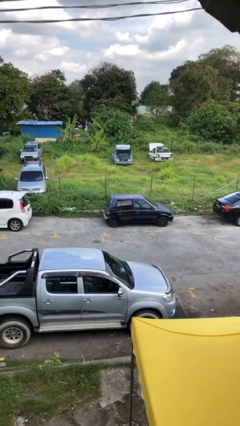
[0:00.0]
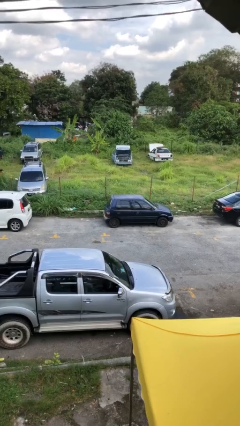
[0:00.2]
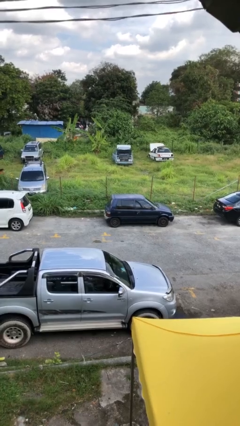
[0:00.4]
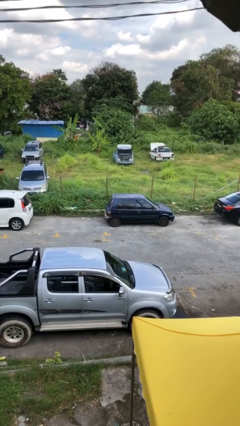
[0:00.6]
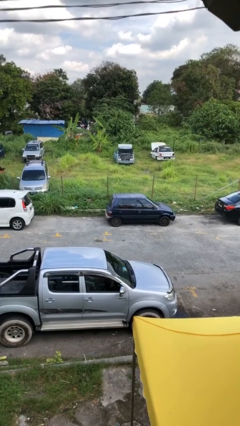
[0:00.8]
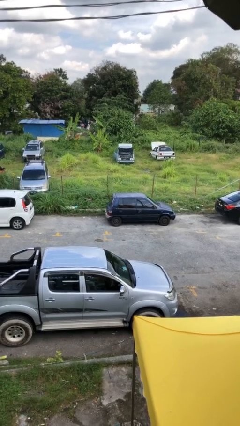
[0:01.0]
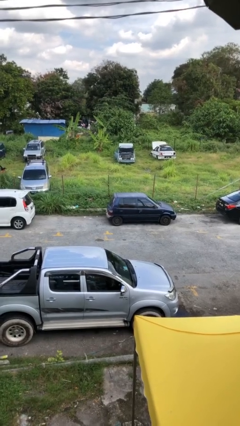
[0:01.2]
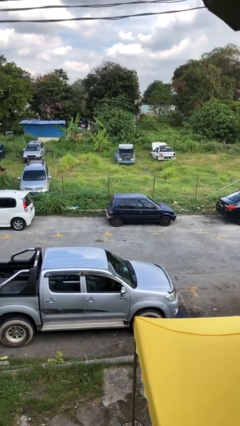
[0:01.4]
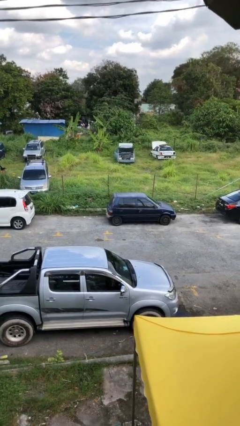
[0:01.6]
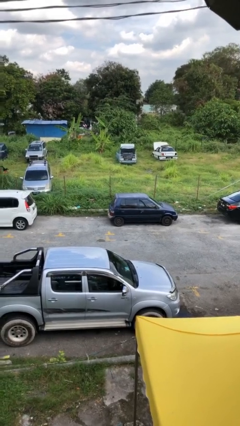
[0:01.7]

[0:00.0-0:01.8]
person closes car door

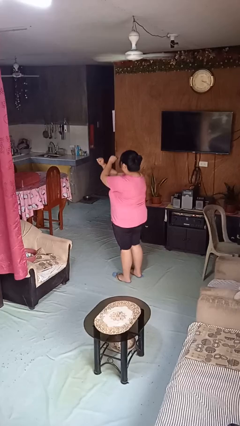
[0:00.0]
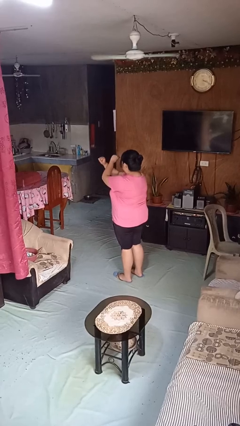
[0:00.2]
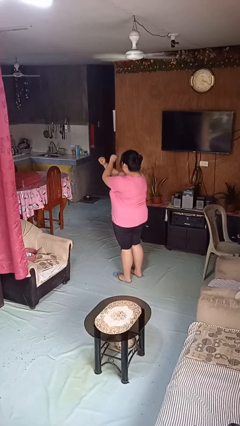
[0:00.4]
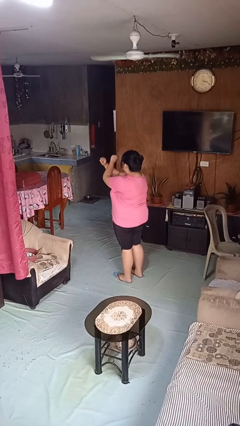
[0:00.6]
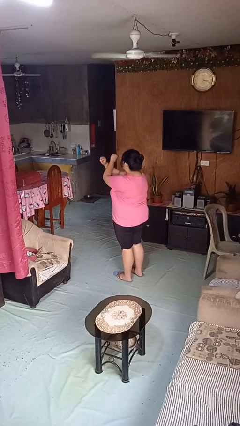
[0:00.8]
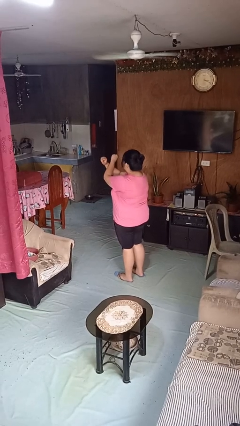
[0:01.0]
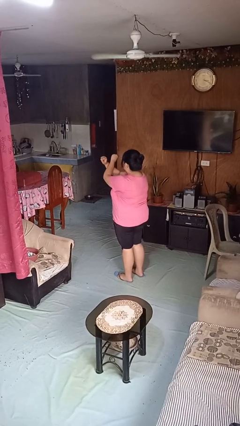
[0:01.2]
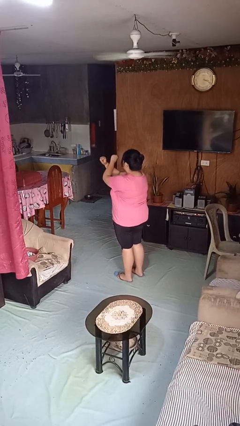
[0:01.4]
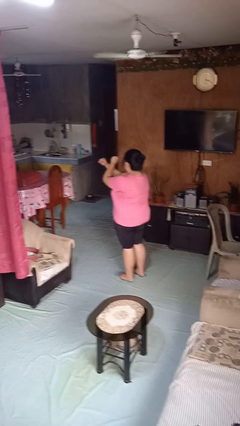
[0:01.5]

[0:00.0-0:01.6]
person gestures arms x

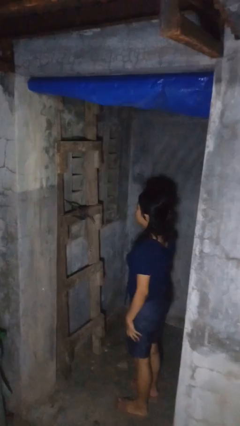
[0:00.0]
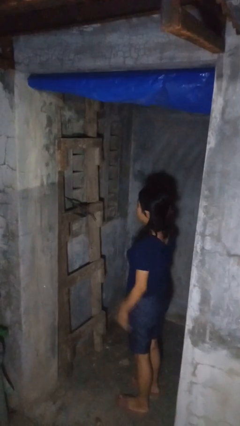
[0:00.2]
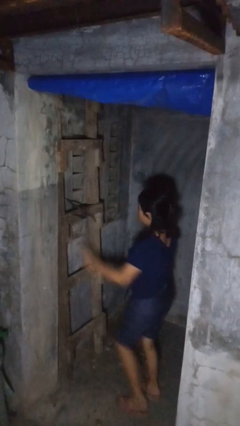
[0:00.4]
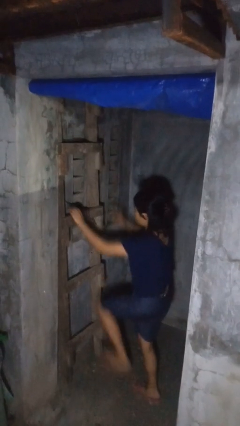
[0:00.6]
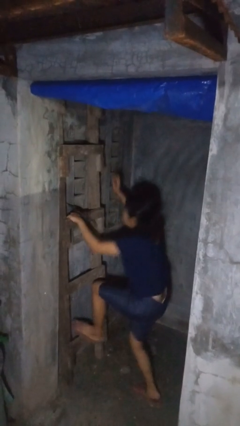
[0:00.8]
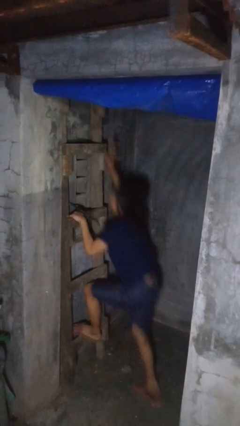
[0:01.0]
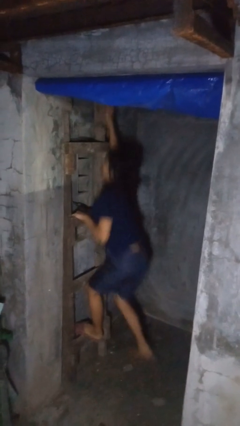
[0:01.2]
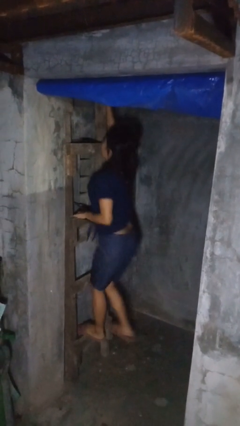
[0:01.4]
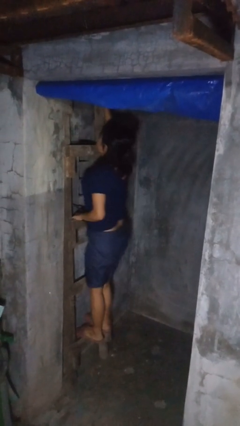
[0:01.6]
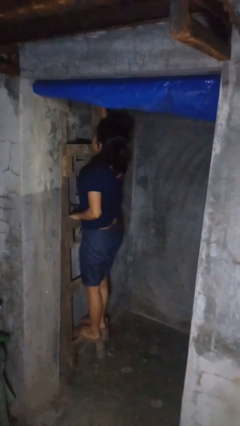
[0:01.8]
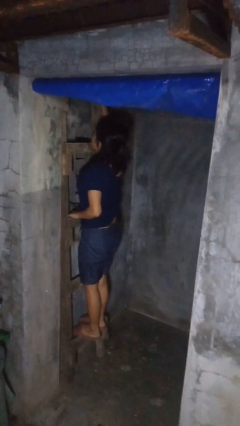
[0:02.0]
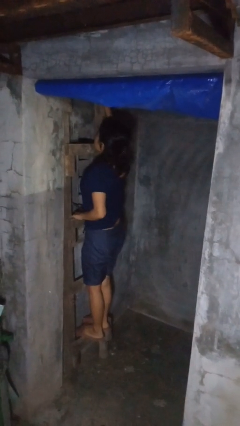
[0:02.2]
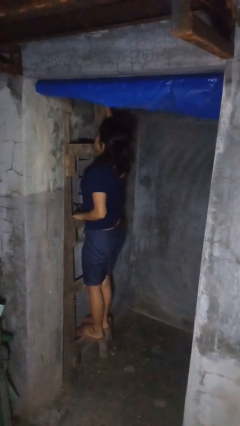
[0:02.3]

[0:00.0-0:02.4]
person climbs up ladder

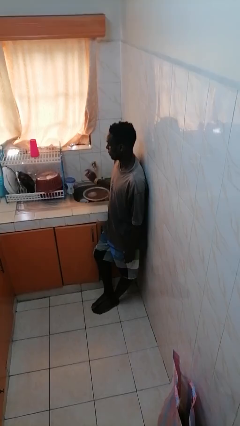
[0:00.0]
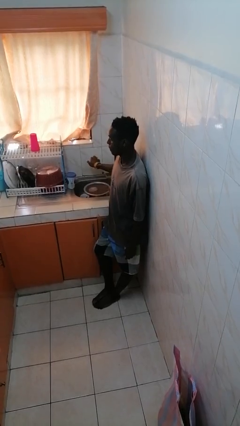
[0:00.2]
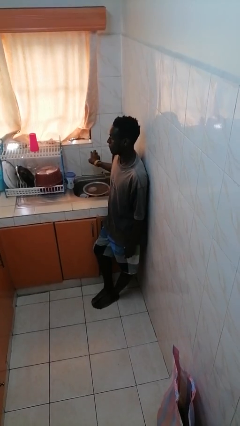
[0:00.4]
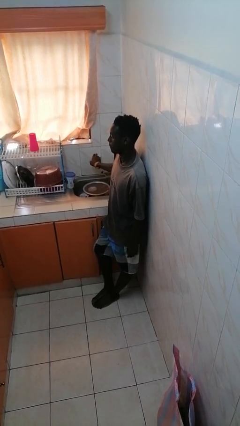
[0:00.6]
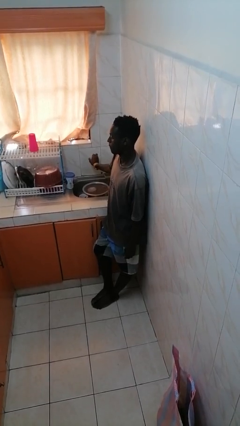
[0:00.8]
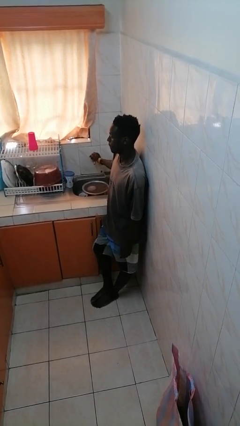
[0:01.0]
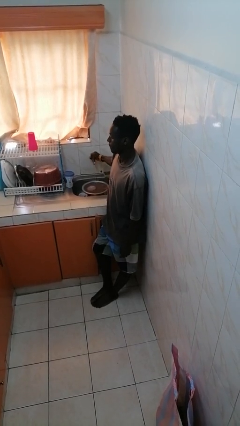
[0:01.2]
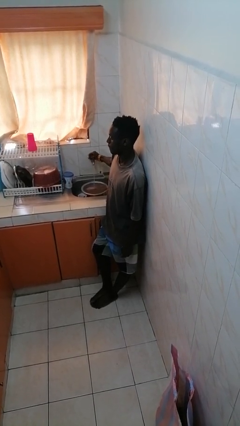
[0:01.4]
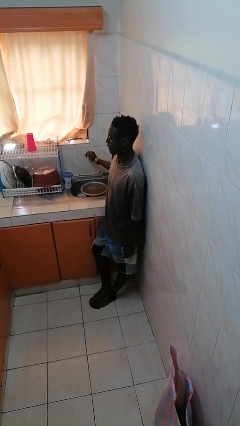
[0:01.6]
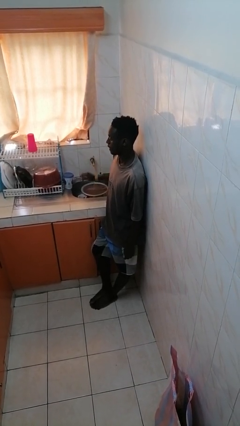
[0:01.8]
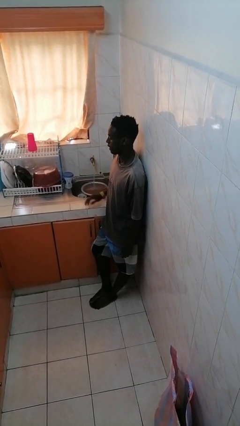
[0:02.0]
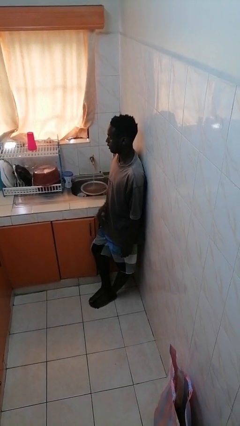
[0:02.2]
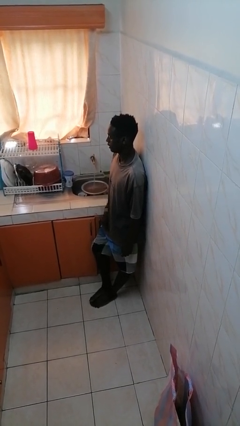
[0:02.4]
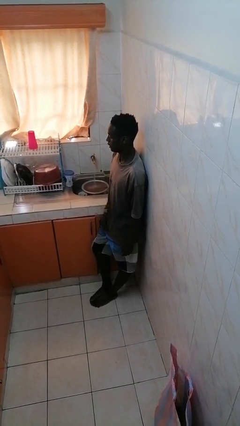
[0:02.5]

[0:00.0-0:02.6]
person turns on faucet

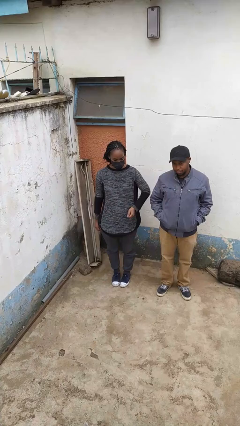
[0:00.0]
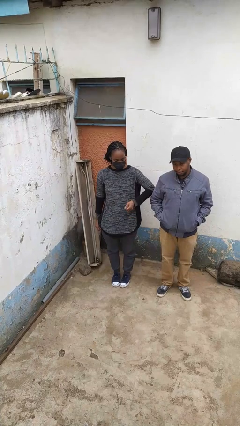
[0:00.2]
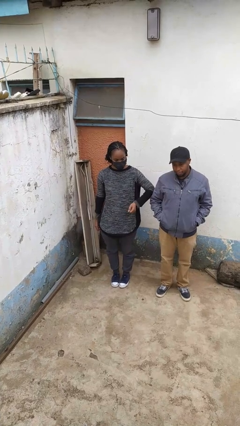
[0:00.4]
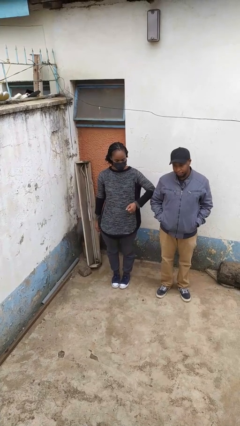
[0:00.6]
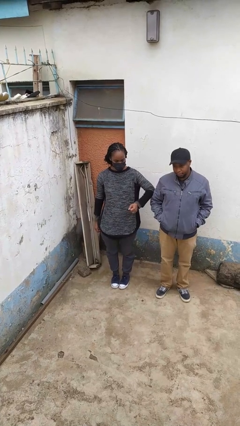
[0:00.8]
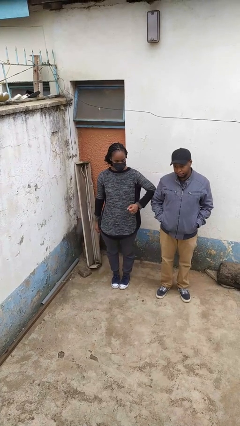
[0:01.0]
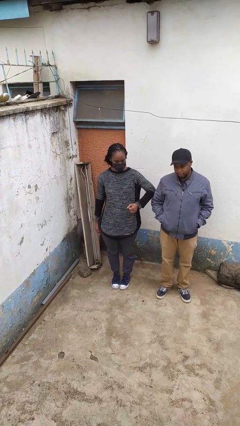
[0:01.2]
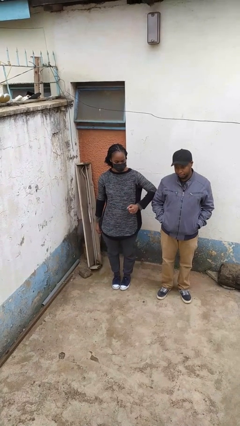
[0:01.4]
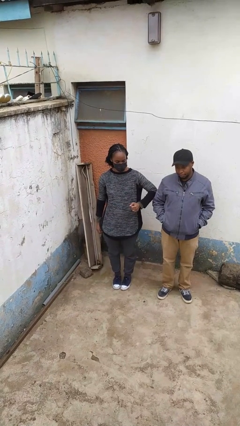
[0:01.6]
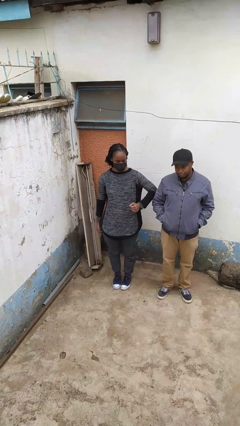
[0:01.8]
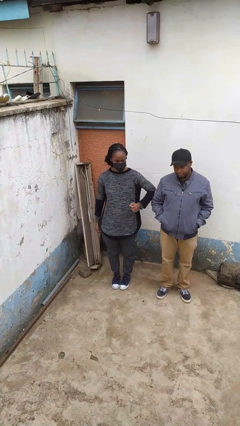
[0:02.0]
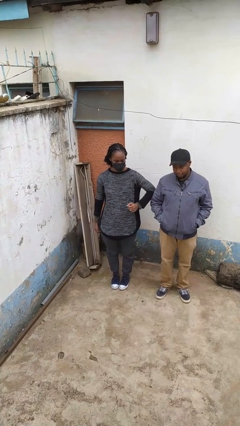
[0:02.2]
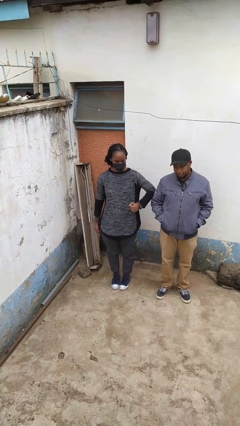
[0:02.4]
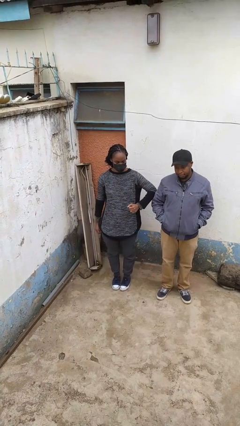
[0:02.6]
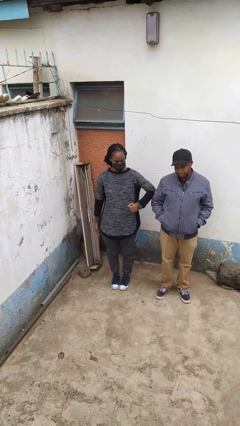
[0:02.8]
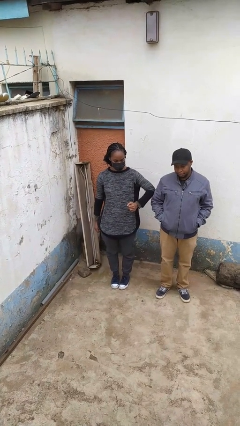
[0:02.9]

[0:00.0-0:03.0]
person nudges person with elbow

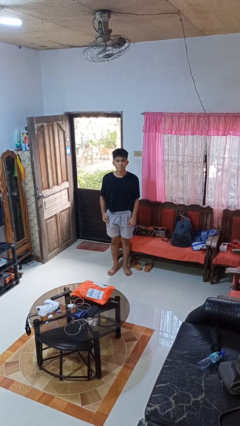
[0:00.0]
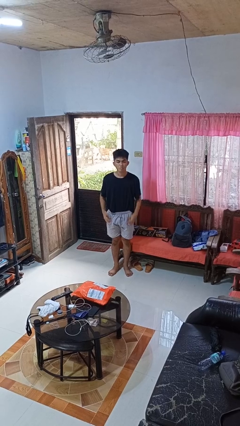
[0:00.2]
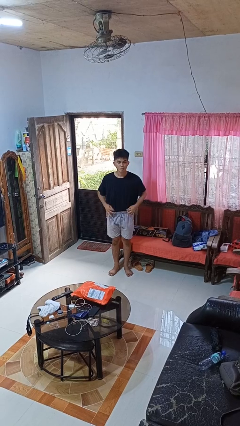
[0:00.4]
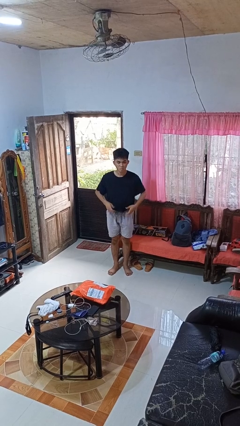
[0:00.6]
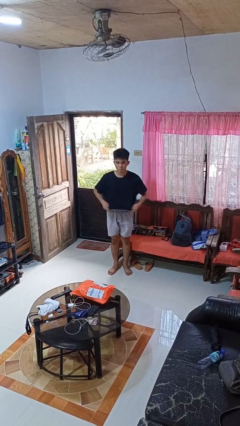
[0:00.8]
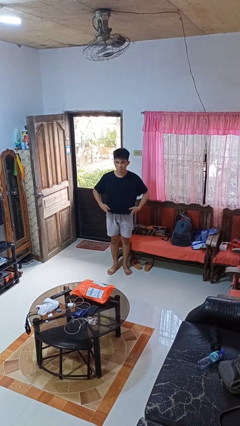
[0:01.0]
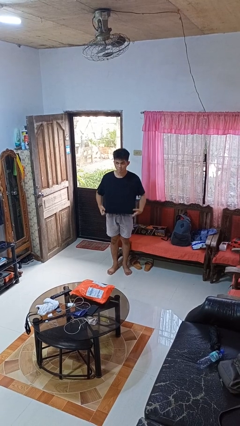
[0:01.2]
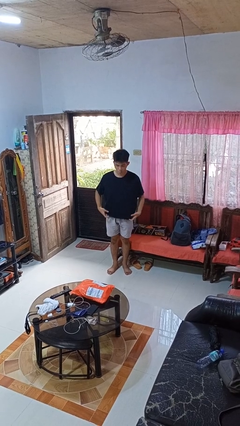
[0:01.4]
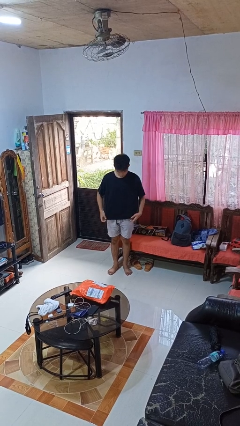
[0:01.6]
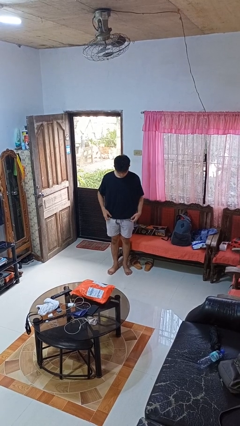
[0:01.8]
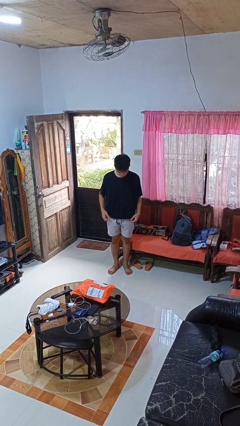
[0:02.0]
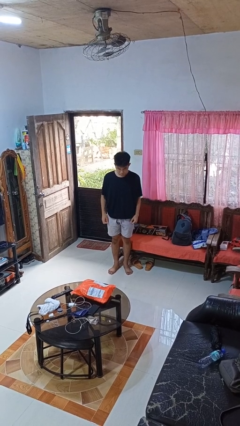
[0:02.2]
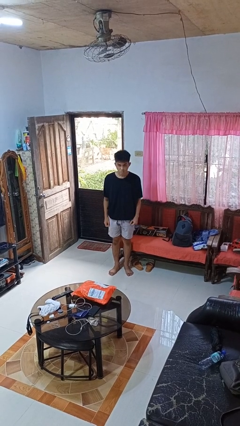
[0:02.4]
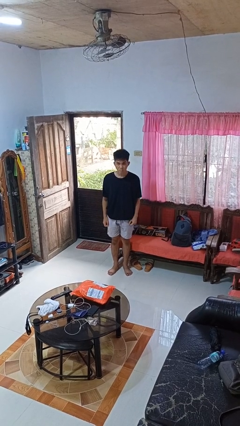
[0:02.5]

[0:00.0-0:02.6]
person untucks shirt

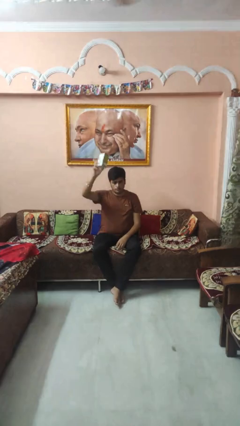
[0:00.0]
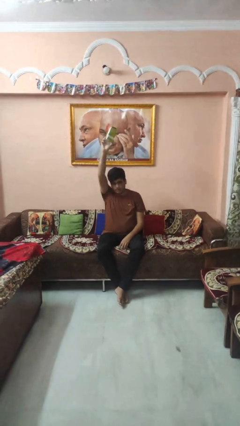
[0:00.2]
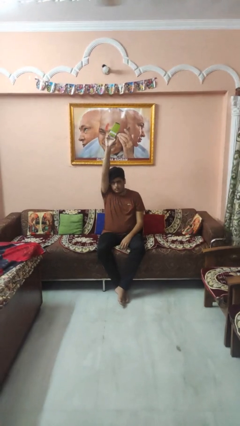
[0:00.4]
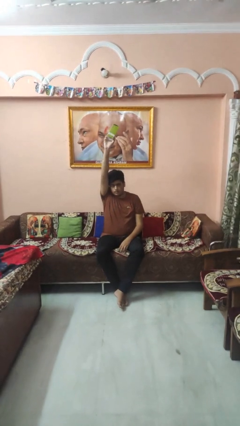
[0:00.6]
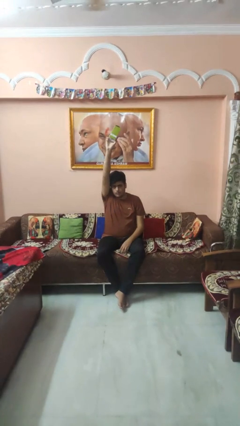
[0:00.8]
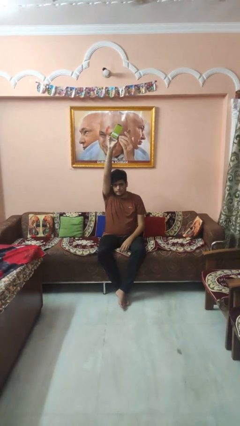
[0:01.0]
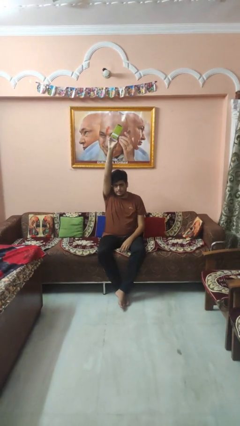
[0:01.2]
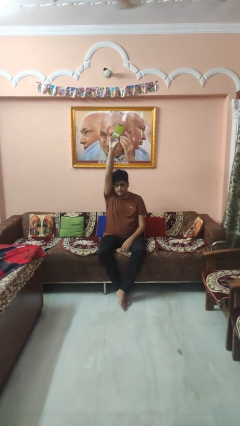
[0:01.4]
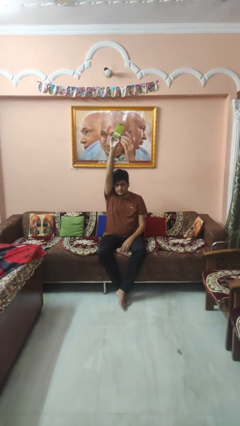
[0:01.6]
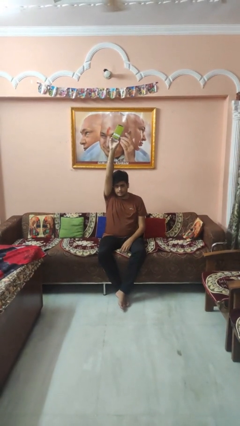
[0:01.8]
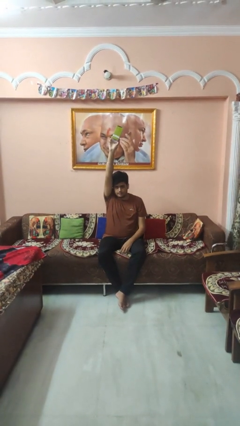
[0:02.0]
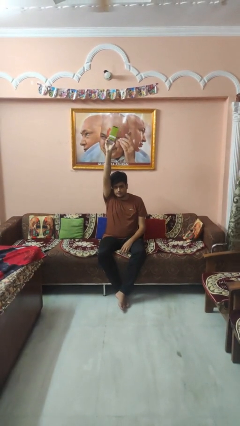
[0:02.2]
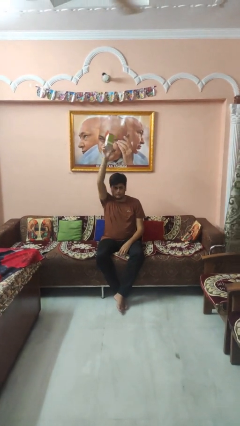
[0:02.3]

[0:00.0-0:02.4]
person holds object above head
